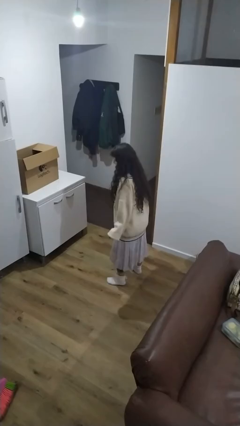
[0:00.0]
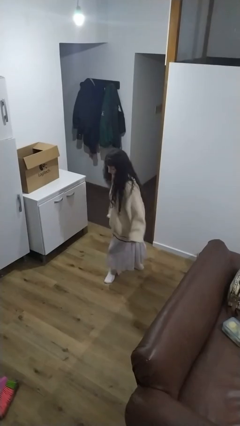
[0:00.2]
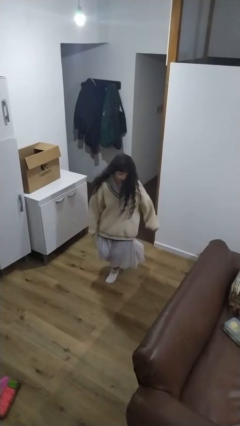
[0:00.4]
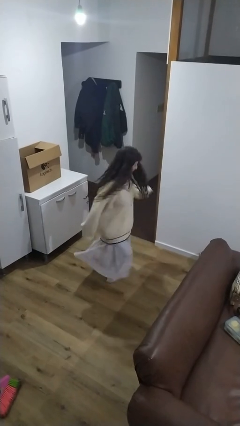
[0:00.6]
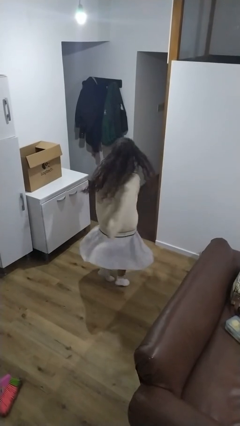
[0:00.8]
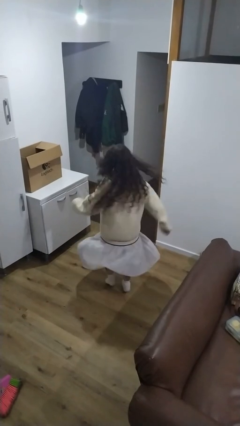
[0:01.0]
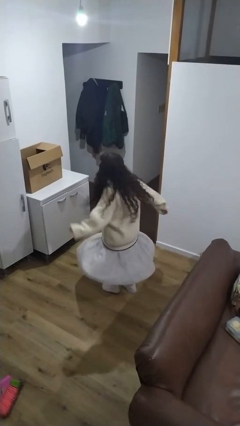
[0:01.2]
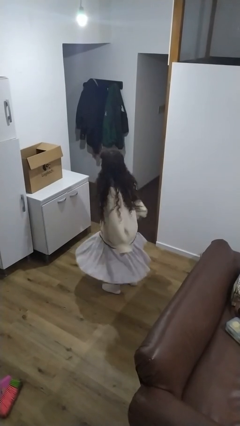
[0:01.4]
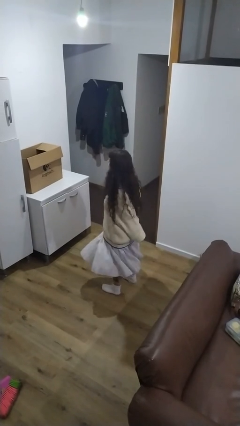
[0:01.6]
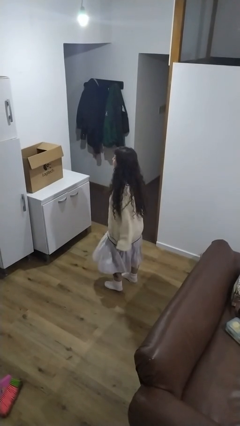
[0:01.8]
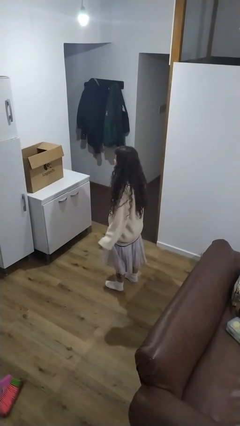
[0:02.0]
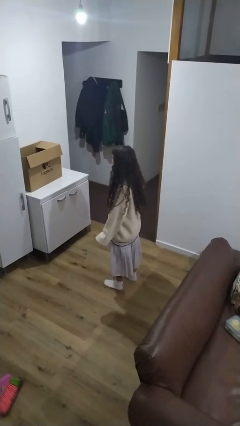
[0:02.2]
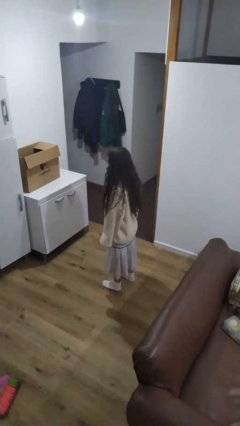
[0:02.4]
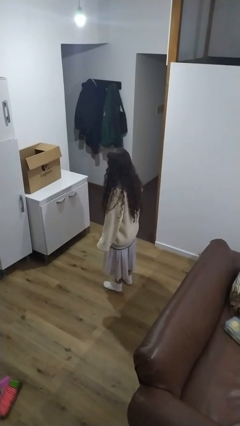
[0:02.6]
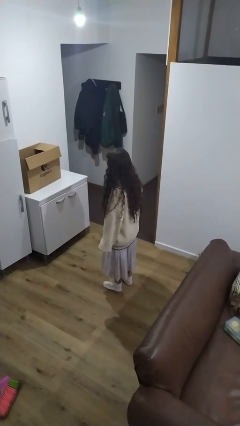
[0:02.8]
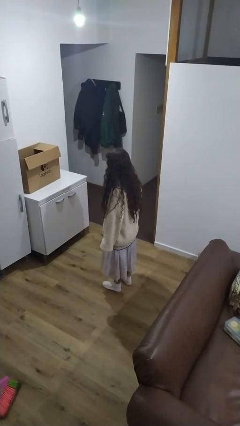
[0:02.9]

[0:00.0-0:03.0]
person twirls

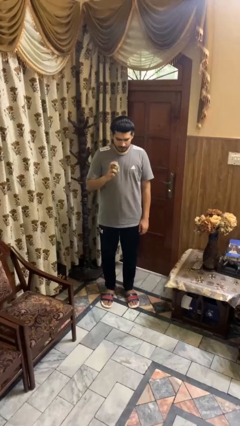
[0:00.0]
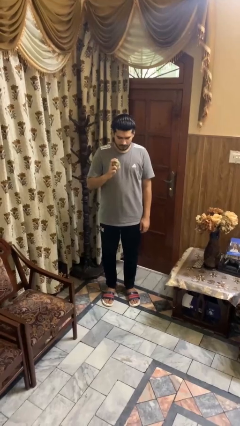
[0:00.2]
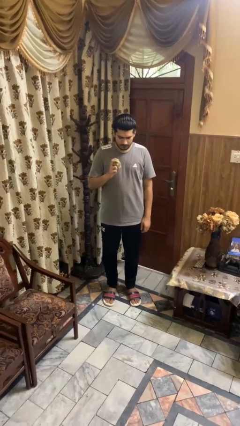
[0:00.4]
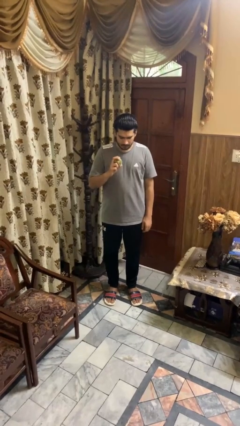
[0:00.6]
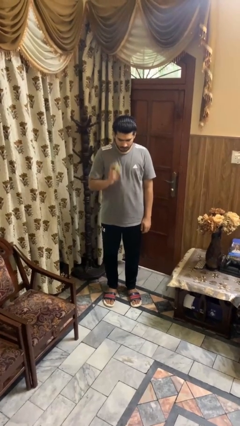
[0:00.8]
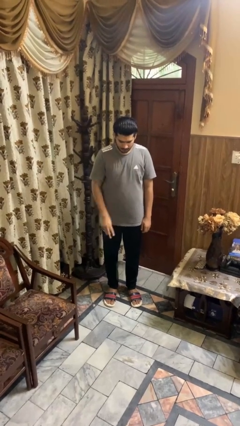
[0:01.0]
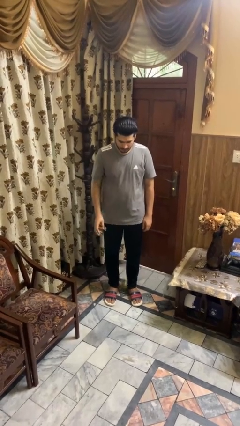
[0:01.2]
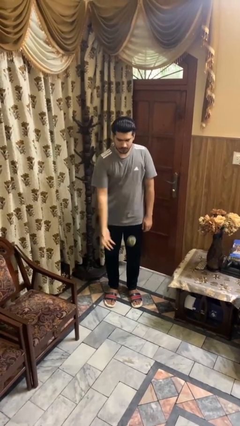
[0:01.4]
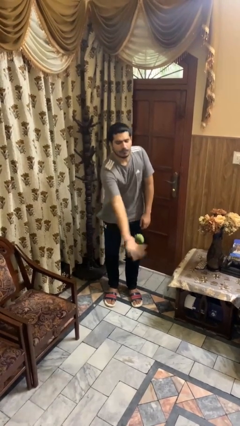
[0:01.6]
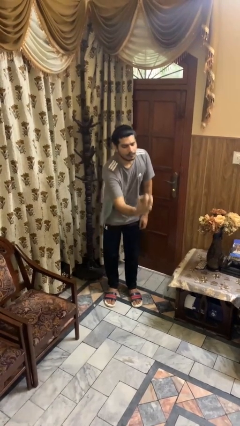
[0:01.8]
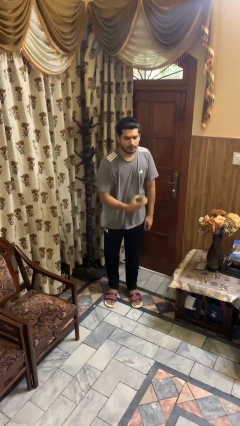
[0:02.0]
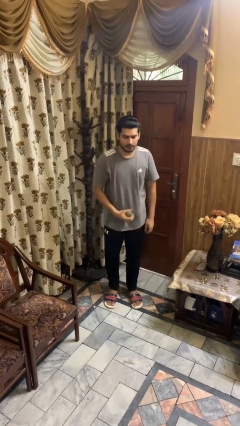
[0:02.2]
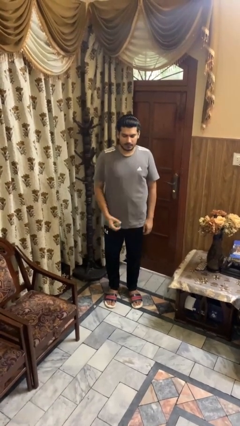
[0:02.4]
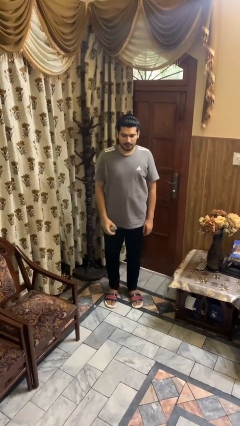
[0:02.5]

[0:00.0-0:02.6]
person bounces ball on floor

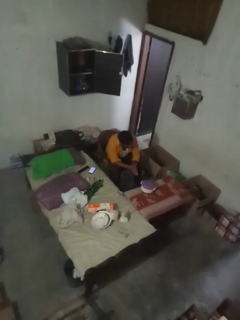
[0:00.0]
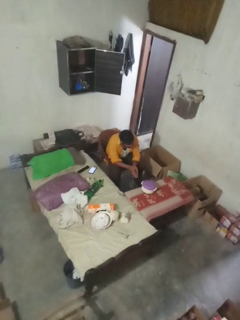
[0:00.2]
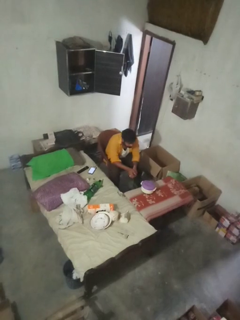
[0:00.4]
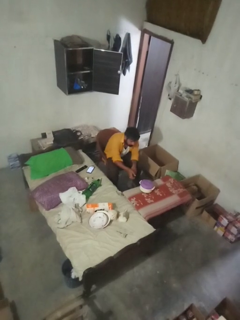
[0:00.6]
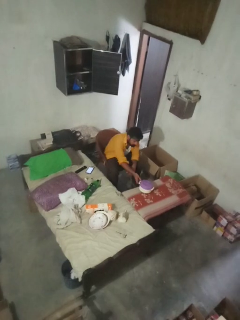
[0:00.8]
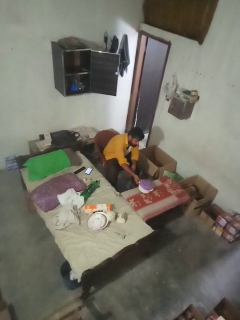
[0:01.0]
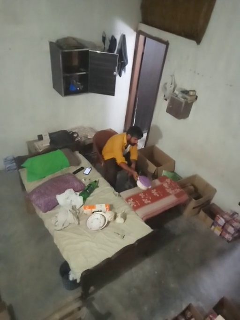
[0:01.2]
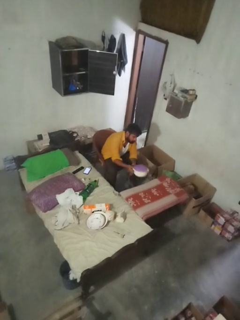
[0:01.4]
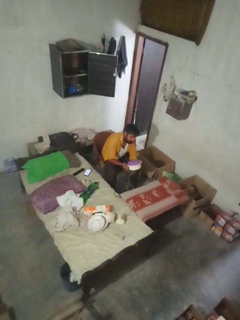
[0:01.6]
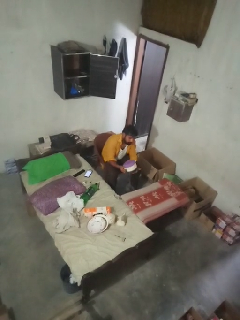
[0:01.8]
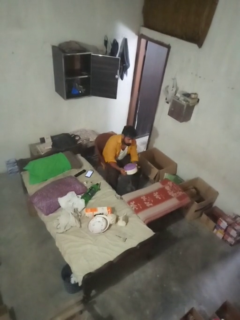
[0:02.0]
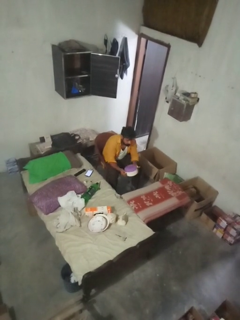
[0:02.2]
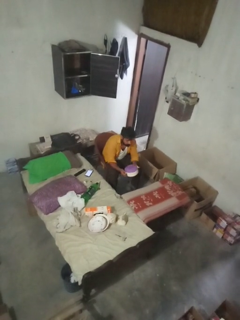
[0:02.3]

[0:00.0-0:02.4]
person puts on apron

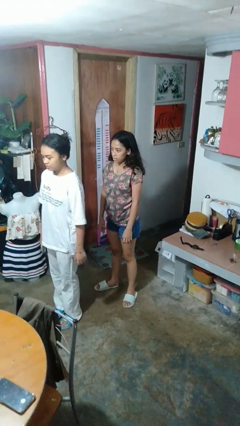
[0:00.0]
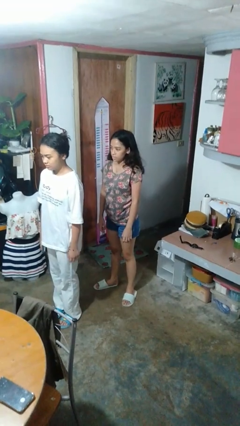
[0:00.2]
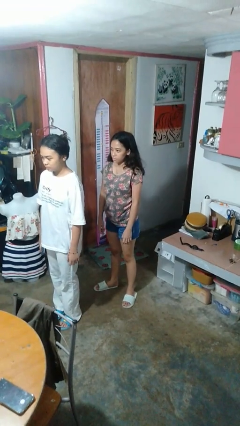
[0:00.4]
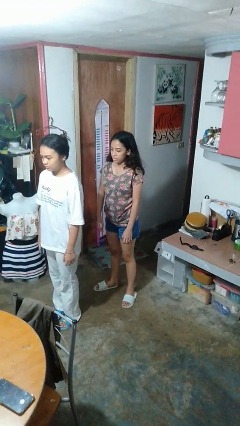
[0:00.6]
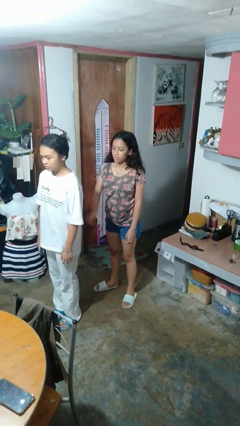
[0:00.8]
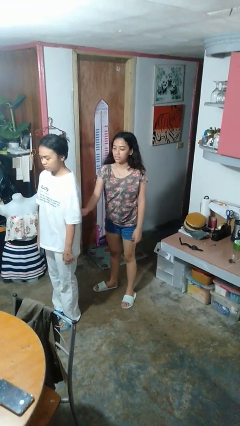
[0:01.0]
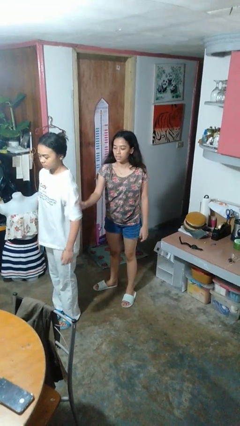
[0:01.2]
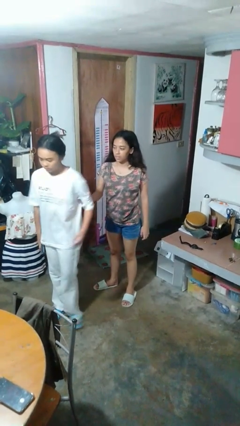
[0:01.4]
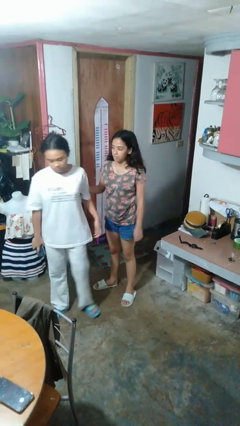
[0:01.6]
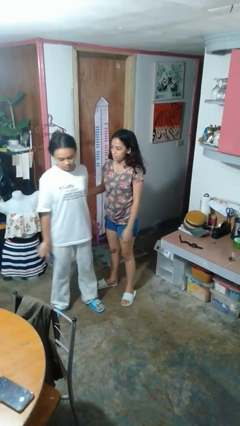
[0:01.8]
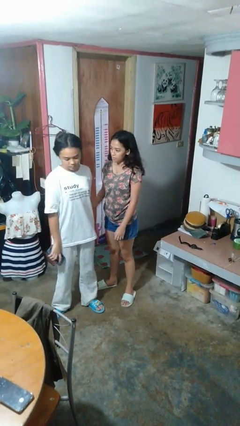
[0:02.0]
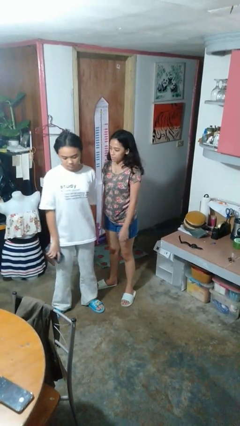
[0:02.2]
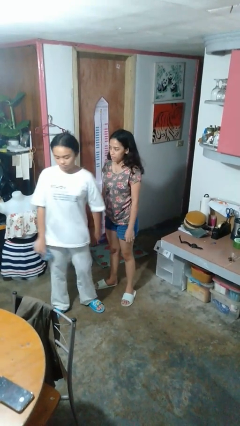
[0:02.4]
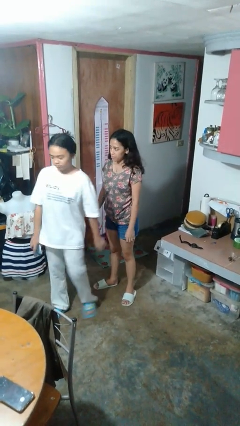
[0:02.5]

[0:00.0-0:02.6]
person grabs person by bicep

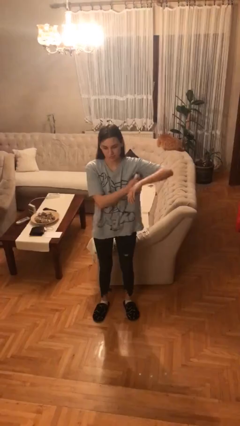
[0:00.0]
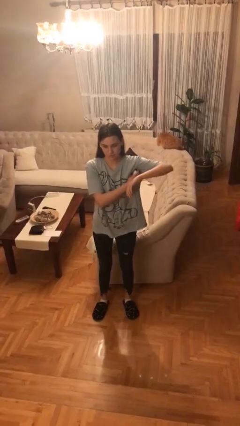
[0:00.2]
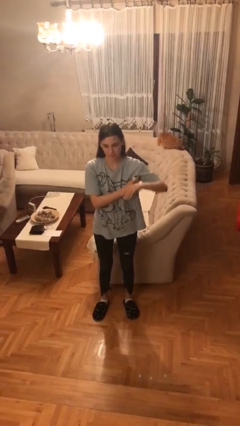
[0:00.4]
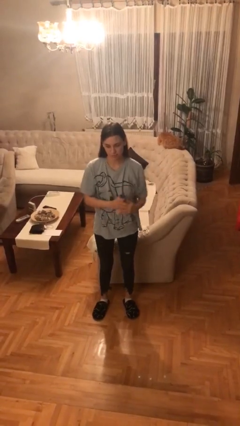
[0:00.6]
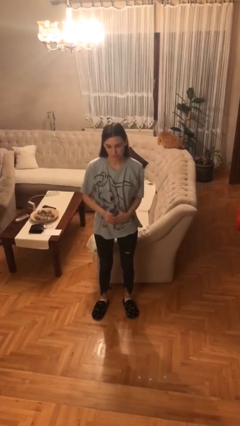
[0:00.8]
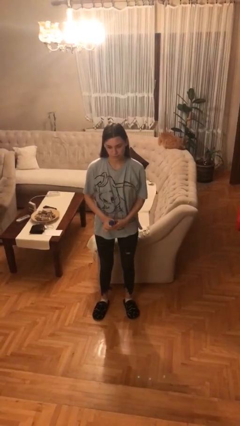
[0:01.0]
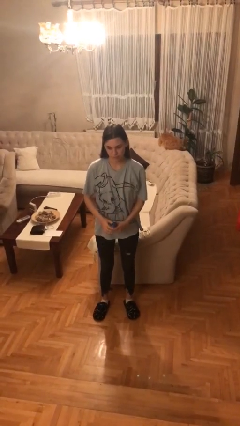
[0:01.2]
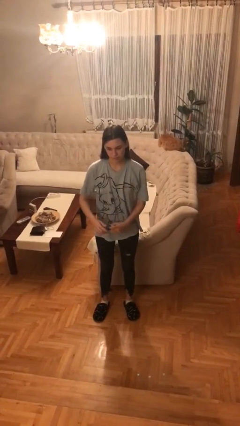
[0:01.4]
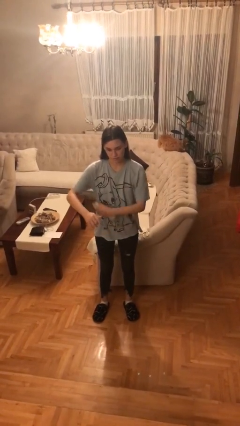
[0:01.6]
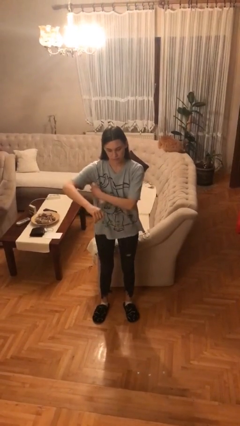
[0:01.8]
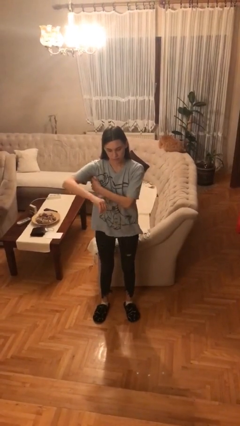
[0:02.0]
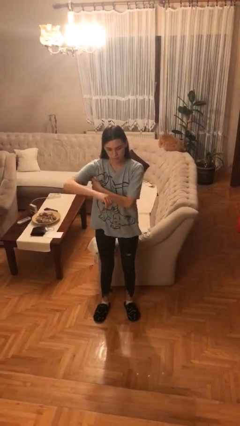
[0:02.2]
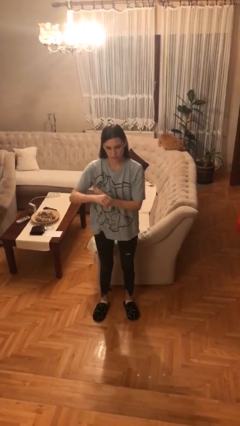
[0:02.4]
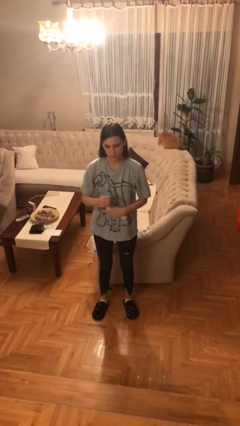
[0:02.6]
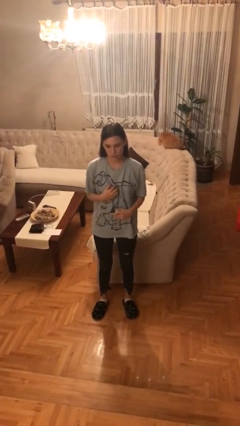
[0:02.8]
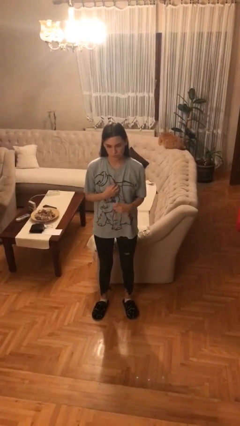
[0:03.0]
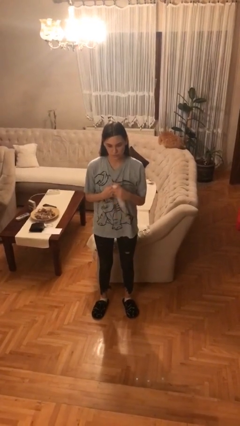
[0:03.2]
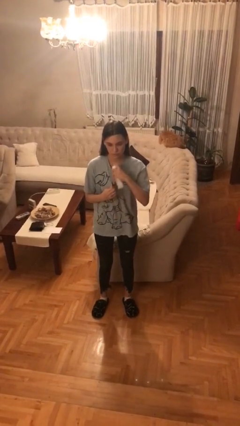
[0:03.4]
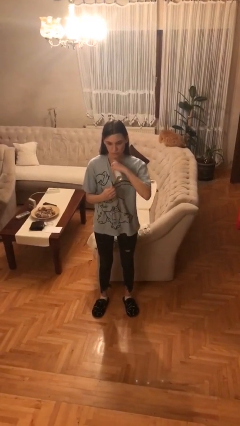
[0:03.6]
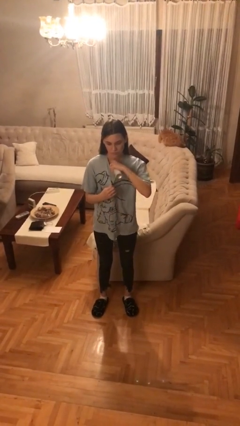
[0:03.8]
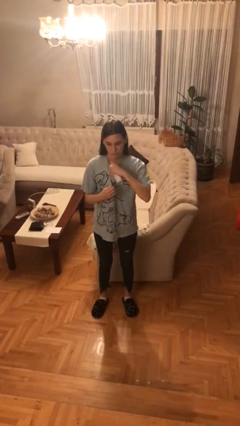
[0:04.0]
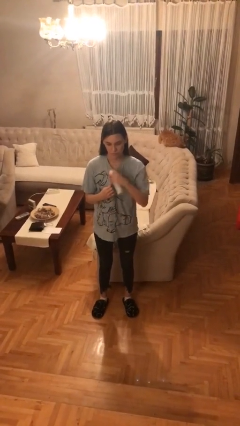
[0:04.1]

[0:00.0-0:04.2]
person applies deodorant

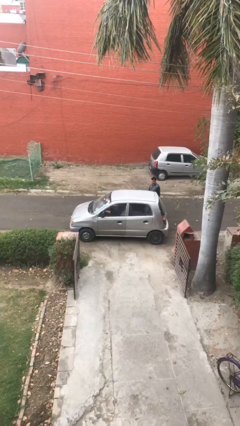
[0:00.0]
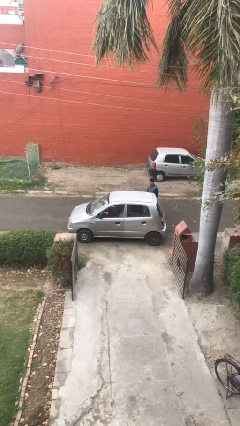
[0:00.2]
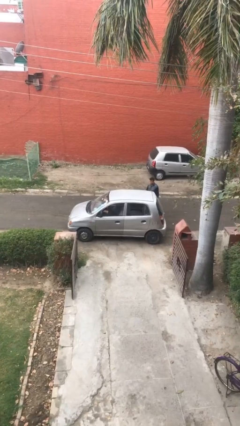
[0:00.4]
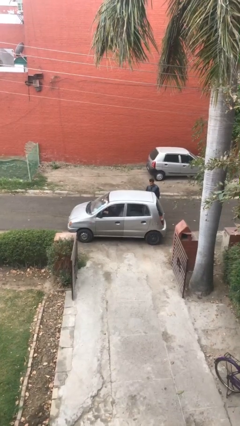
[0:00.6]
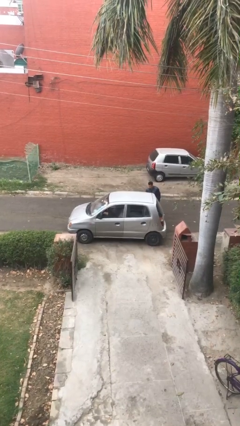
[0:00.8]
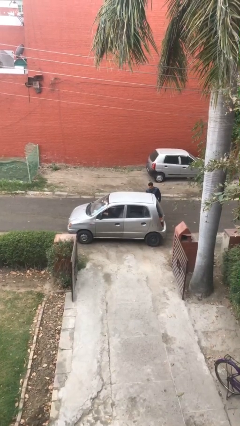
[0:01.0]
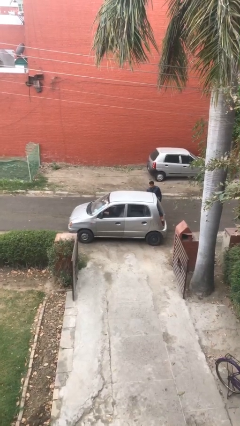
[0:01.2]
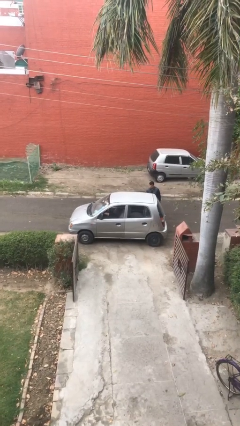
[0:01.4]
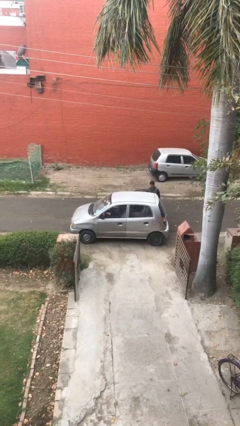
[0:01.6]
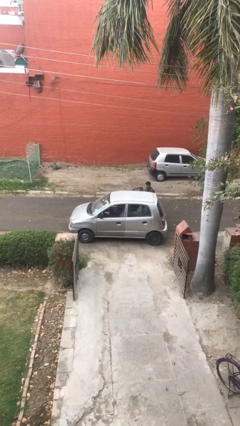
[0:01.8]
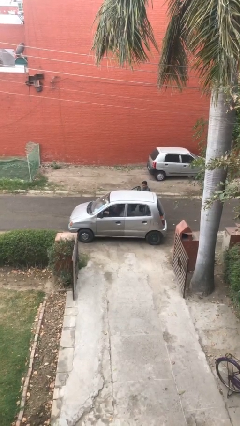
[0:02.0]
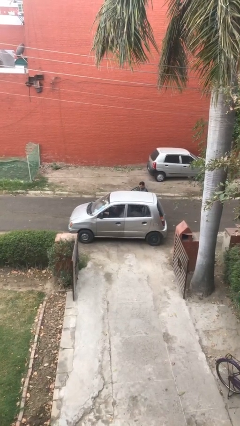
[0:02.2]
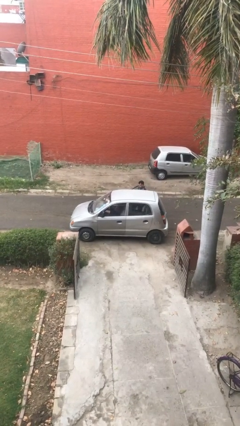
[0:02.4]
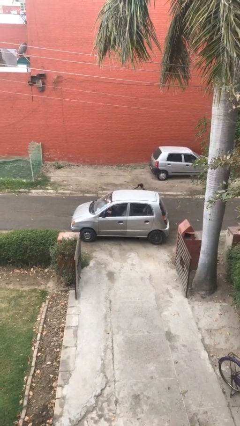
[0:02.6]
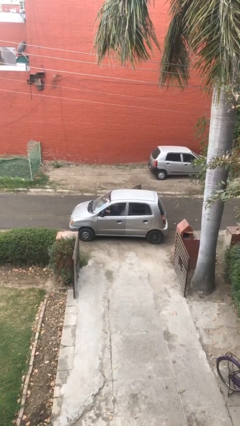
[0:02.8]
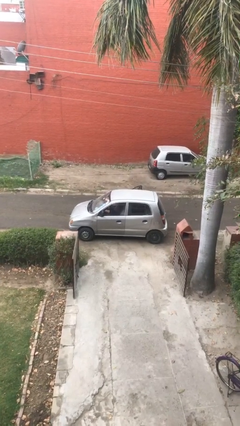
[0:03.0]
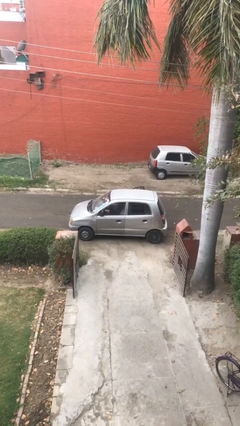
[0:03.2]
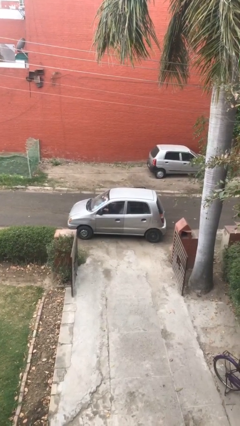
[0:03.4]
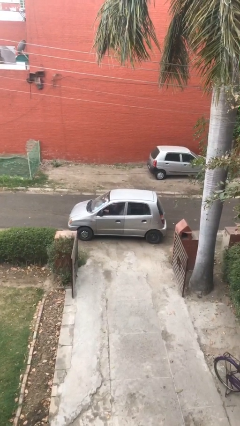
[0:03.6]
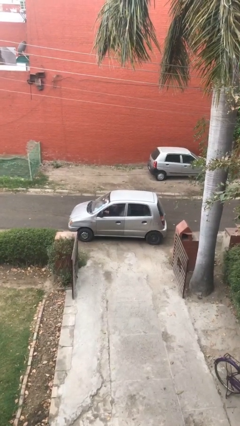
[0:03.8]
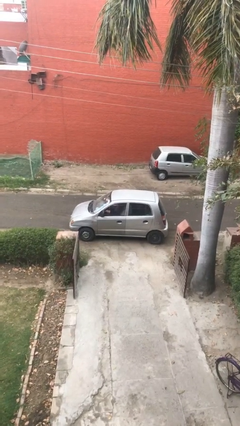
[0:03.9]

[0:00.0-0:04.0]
car picks up person
